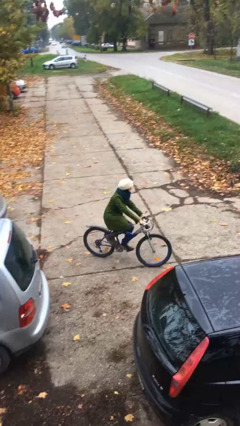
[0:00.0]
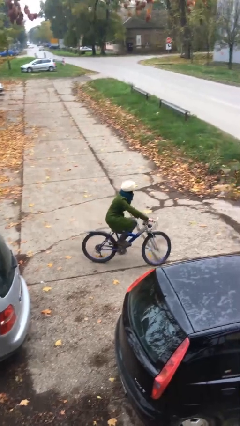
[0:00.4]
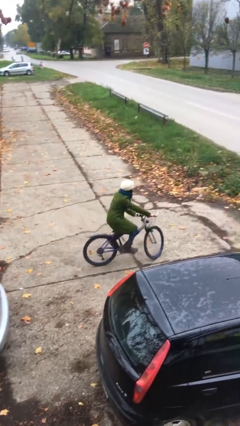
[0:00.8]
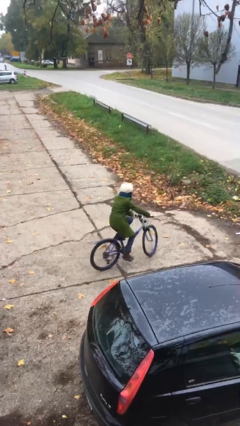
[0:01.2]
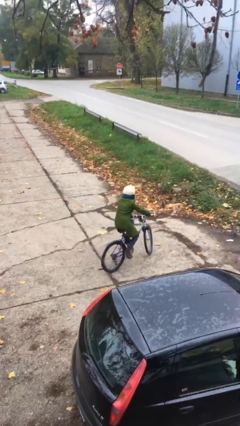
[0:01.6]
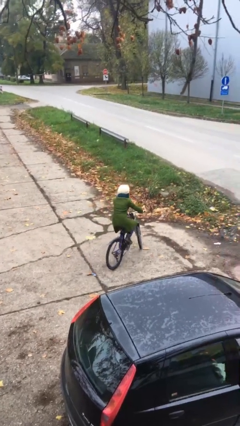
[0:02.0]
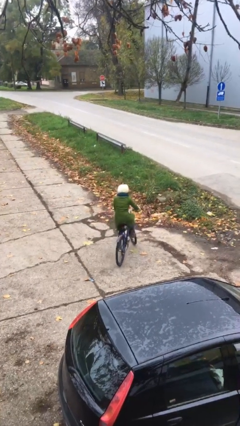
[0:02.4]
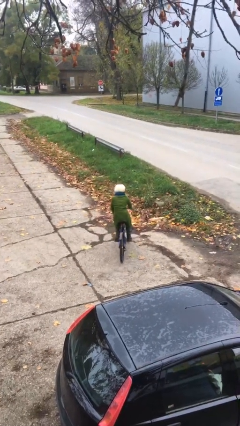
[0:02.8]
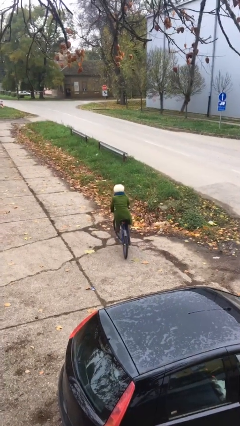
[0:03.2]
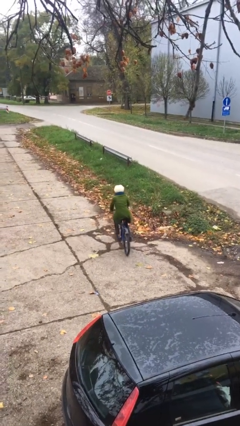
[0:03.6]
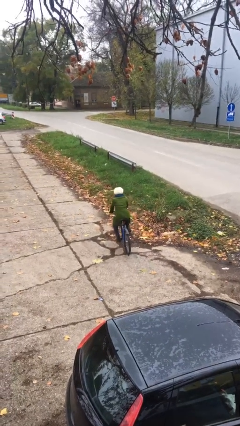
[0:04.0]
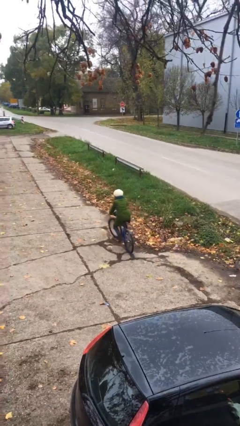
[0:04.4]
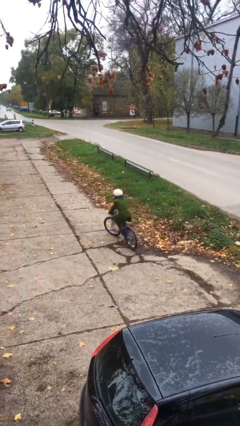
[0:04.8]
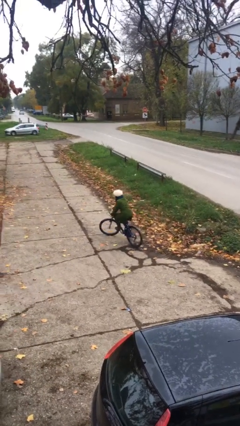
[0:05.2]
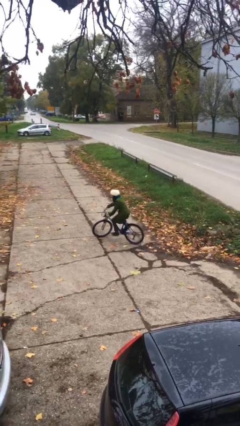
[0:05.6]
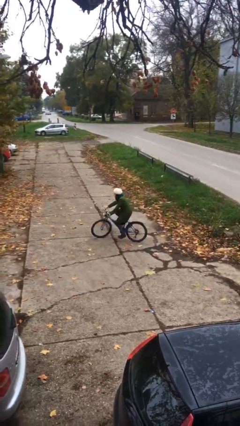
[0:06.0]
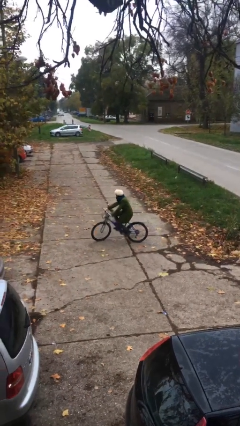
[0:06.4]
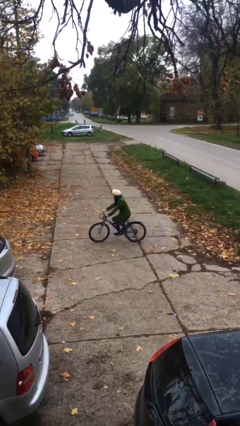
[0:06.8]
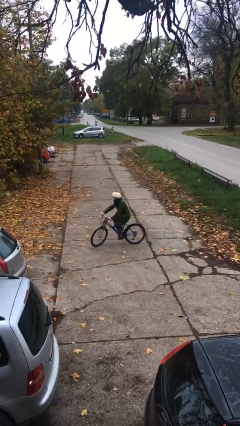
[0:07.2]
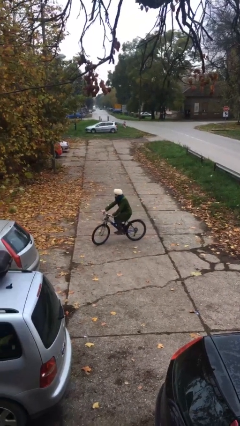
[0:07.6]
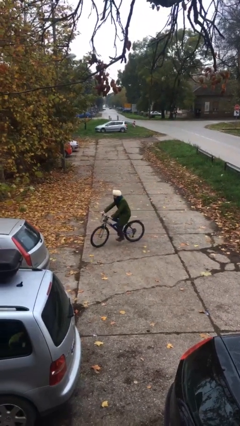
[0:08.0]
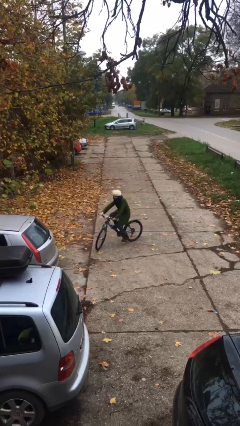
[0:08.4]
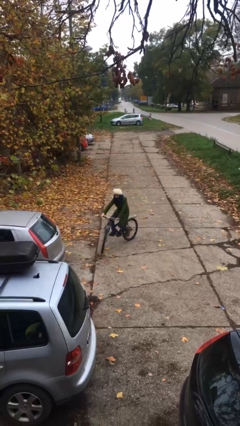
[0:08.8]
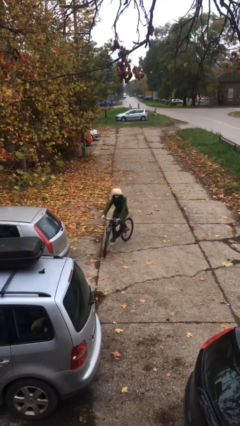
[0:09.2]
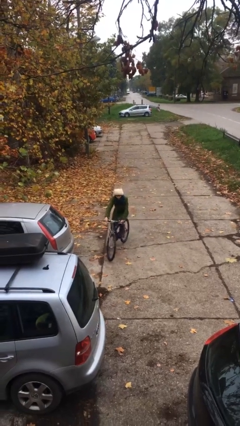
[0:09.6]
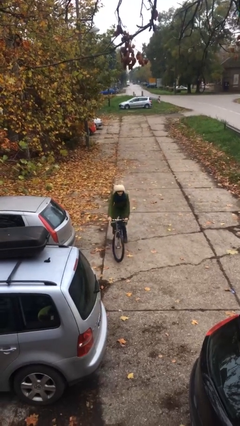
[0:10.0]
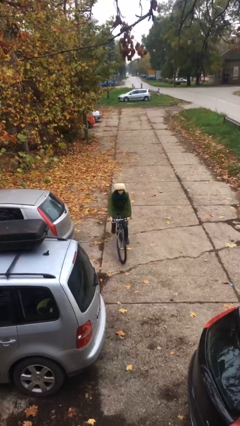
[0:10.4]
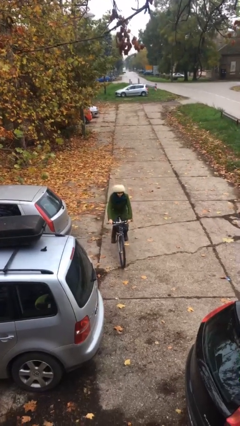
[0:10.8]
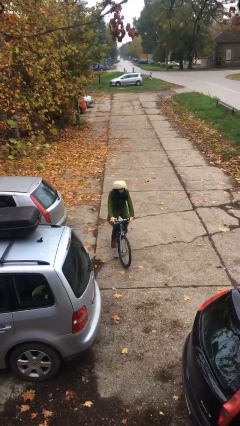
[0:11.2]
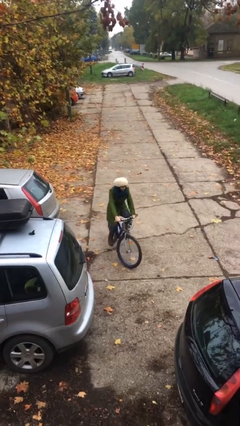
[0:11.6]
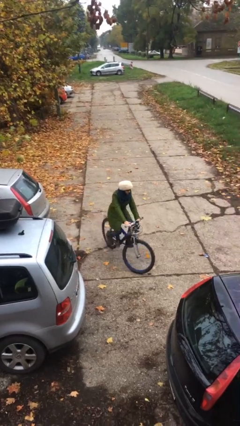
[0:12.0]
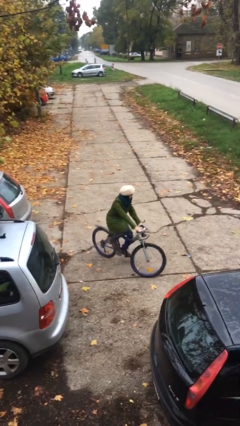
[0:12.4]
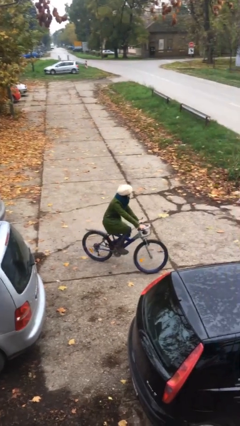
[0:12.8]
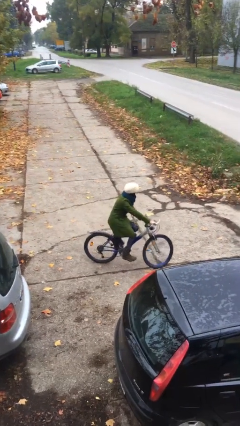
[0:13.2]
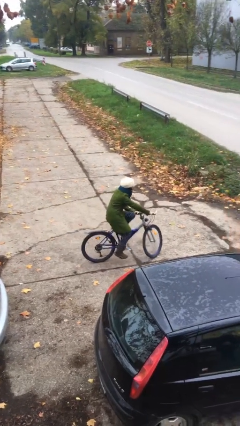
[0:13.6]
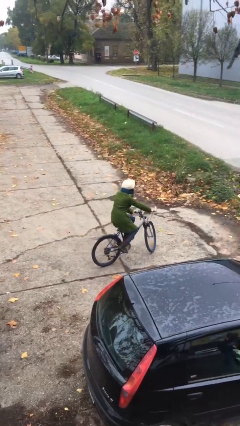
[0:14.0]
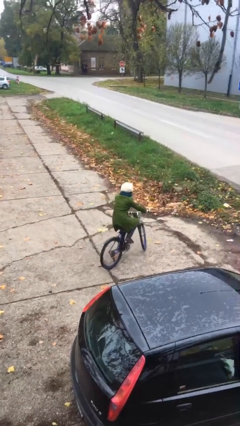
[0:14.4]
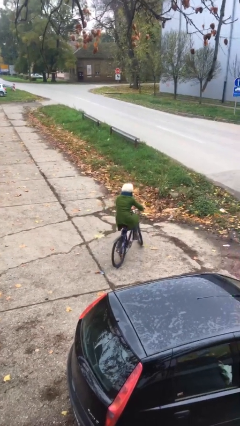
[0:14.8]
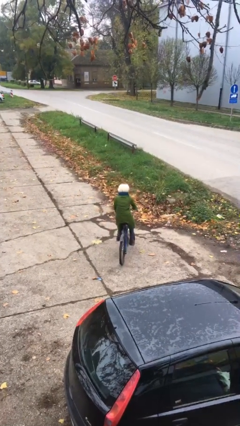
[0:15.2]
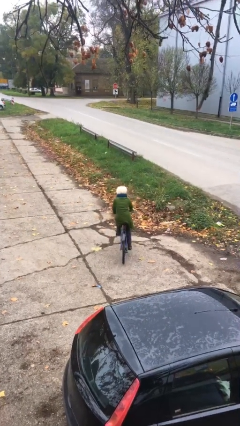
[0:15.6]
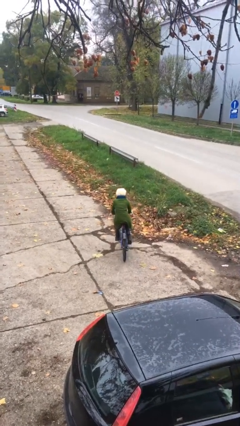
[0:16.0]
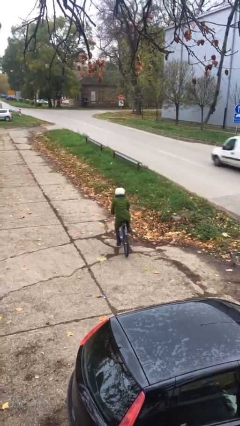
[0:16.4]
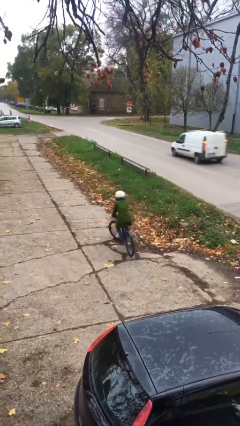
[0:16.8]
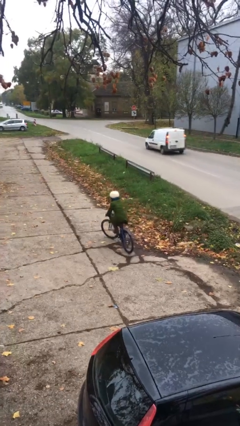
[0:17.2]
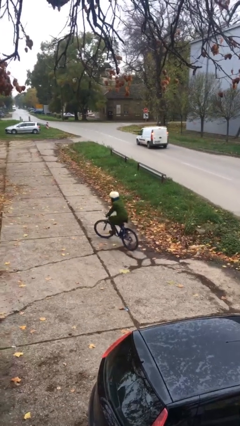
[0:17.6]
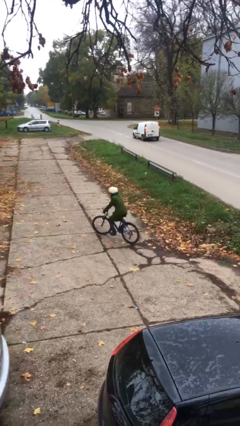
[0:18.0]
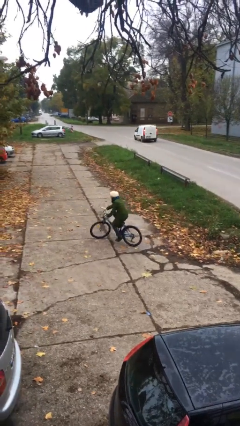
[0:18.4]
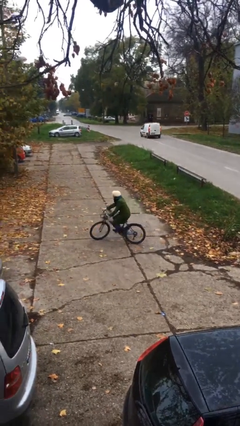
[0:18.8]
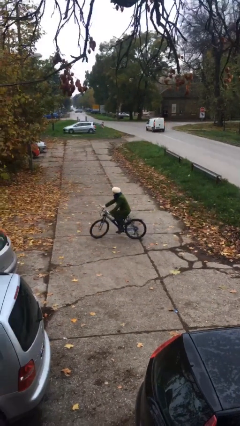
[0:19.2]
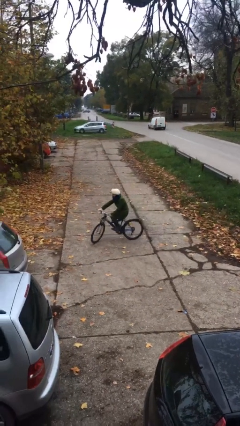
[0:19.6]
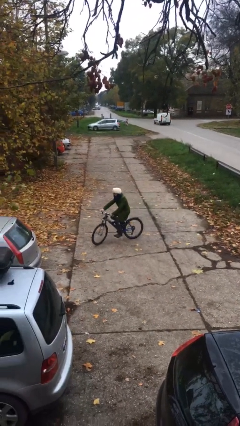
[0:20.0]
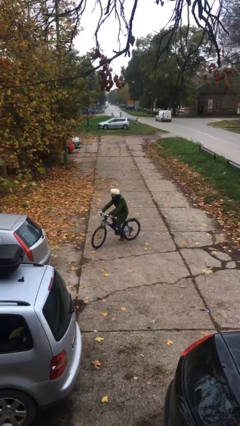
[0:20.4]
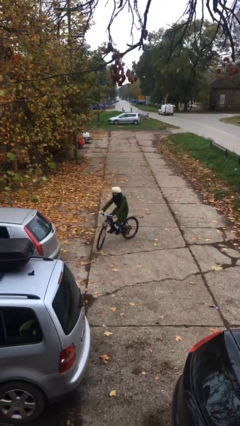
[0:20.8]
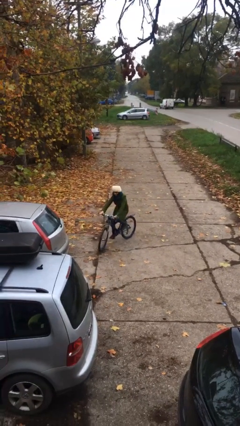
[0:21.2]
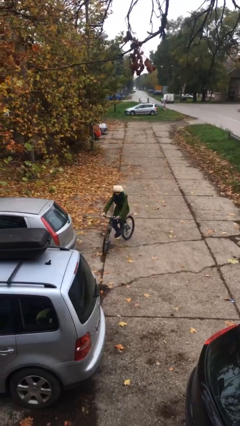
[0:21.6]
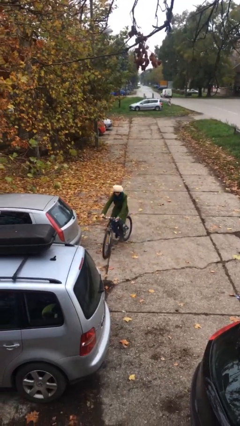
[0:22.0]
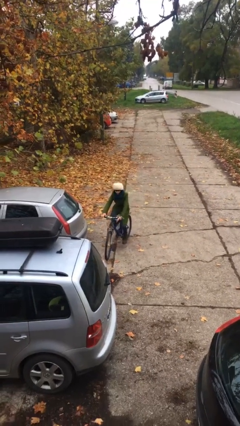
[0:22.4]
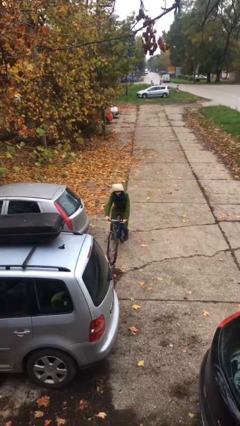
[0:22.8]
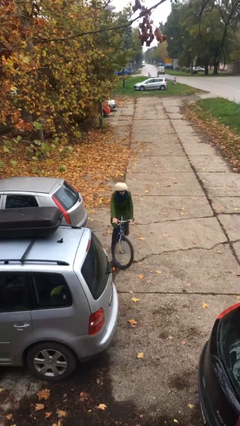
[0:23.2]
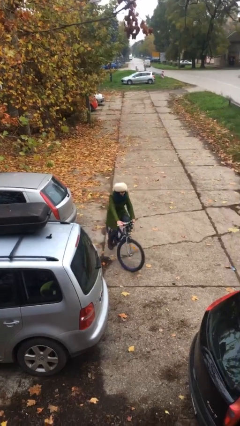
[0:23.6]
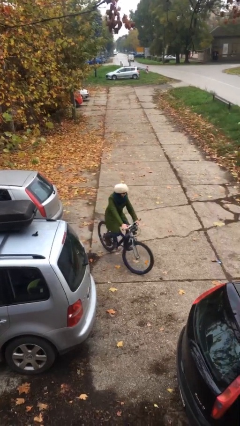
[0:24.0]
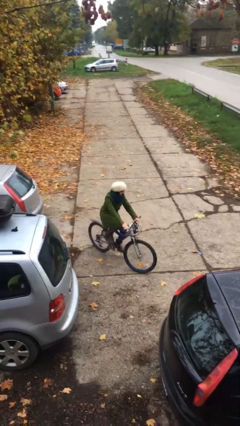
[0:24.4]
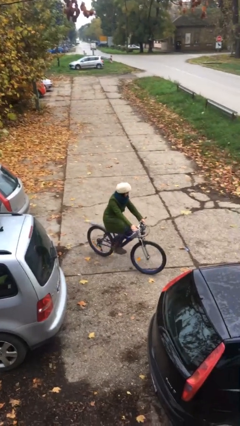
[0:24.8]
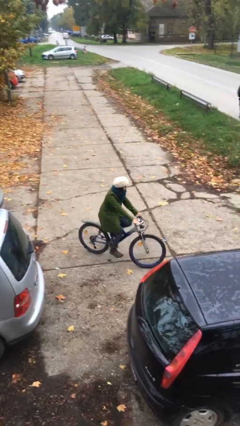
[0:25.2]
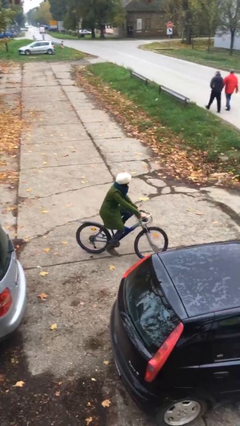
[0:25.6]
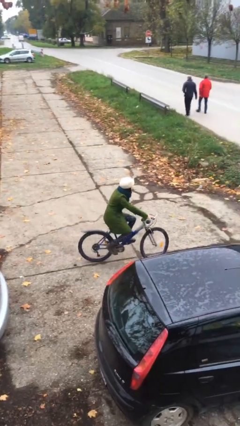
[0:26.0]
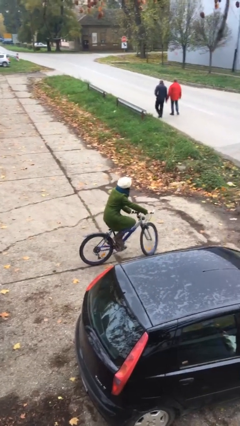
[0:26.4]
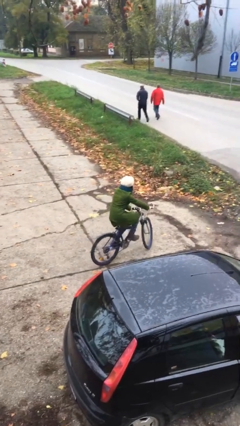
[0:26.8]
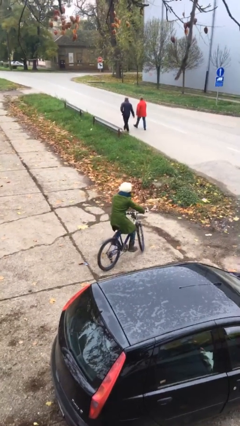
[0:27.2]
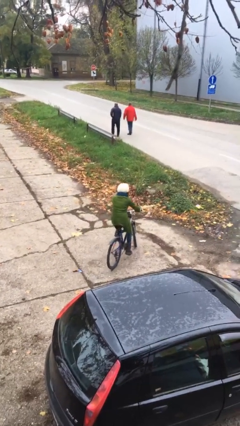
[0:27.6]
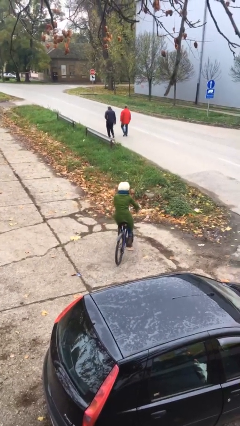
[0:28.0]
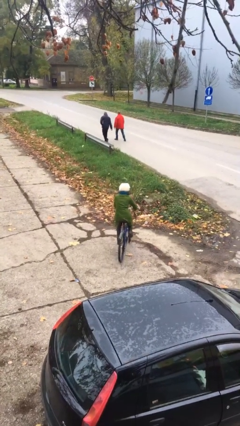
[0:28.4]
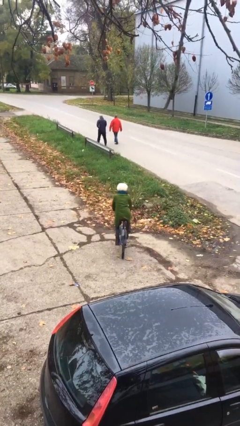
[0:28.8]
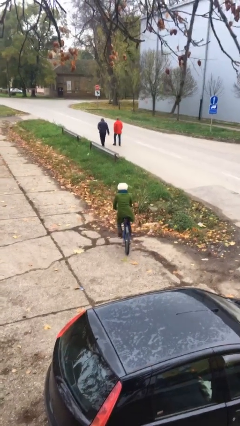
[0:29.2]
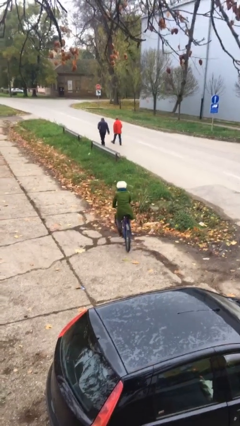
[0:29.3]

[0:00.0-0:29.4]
person rides bicycle

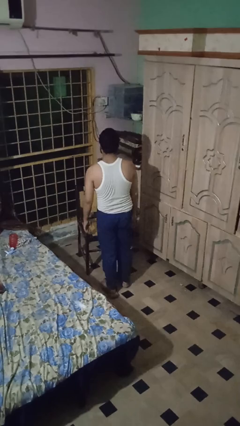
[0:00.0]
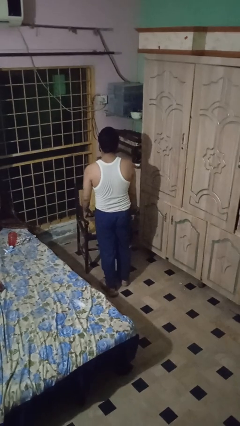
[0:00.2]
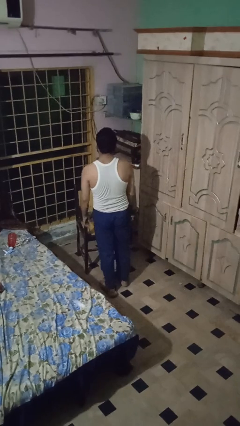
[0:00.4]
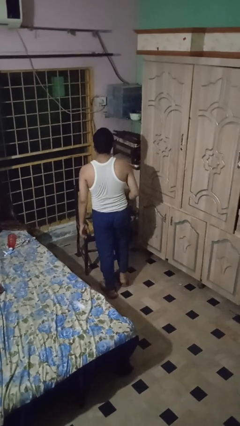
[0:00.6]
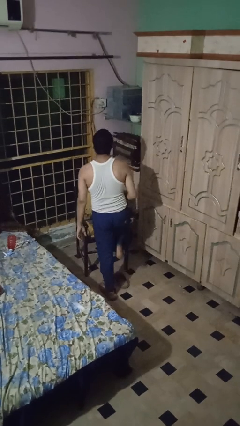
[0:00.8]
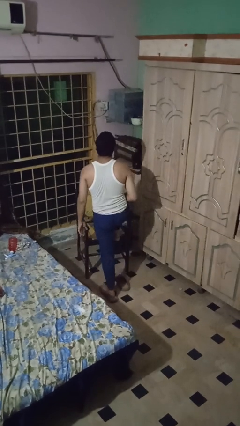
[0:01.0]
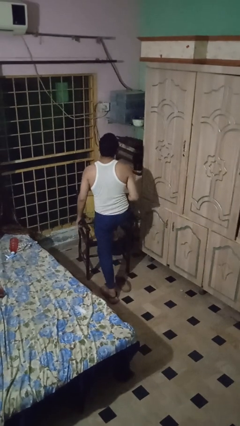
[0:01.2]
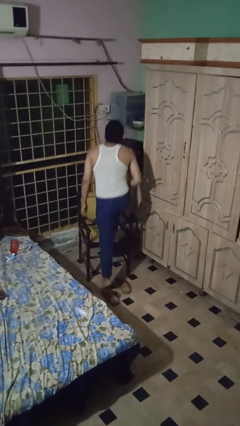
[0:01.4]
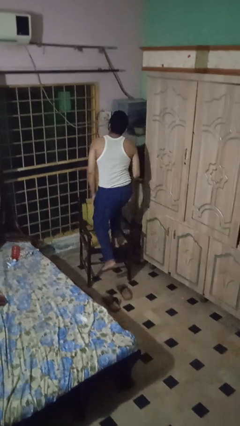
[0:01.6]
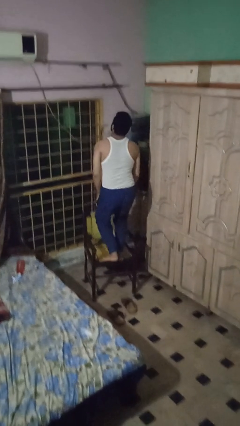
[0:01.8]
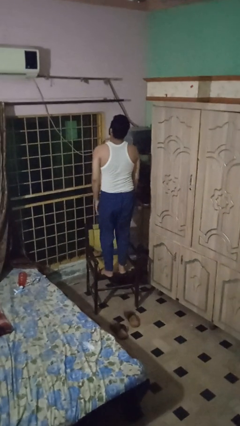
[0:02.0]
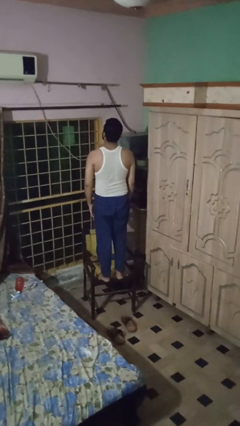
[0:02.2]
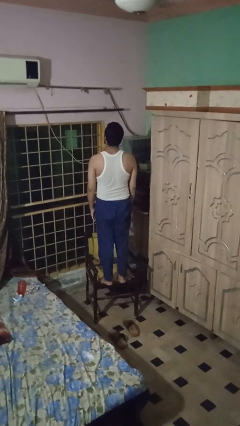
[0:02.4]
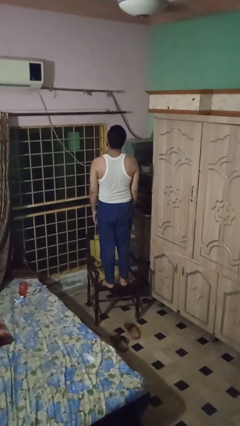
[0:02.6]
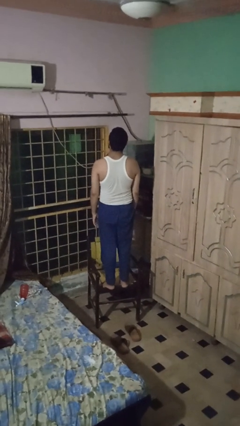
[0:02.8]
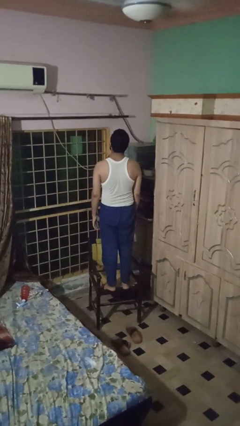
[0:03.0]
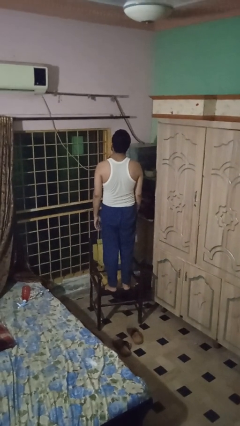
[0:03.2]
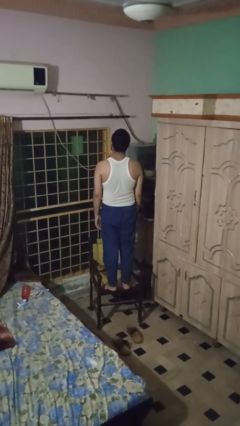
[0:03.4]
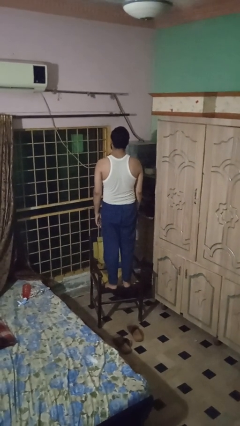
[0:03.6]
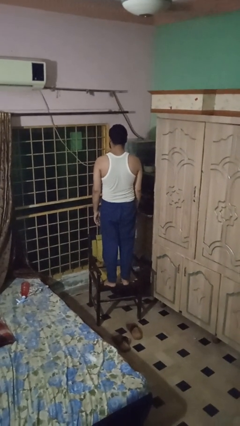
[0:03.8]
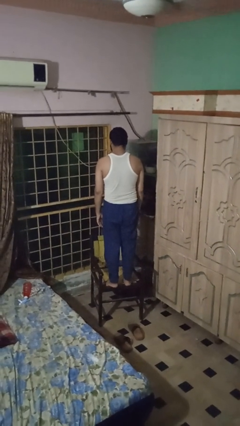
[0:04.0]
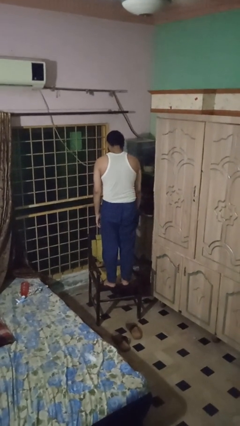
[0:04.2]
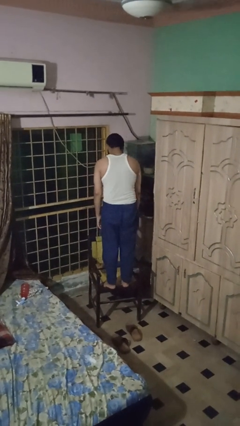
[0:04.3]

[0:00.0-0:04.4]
person climbs on chair
